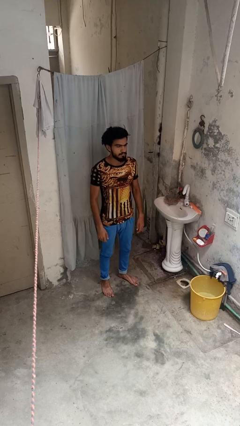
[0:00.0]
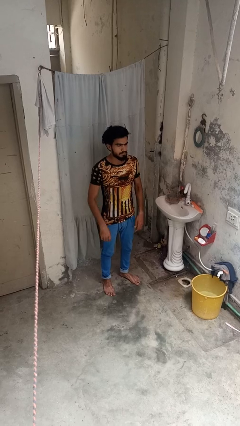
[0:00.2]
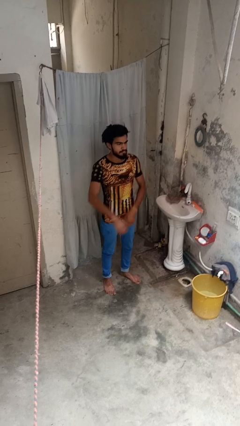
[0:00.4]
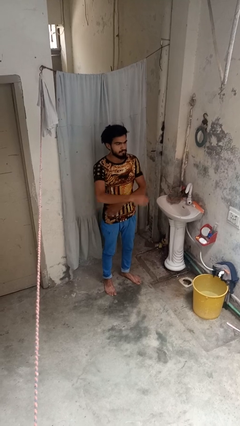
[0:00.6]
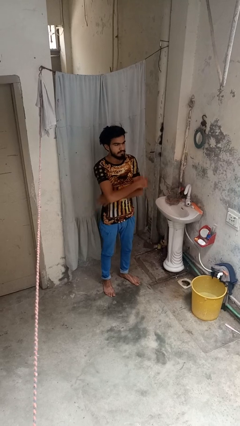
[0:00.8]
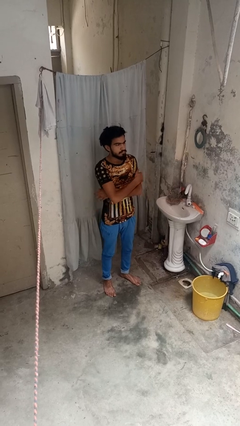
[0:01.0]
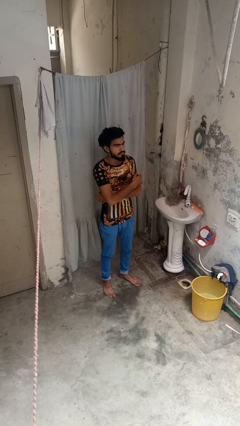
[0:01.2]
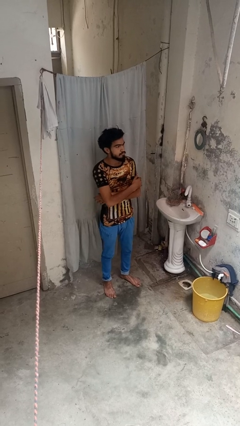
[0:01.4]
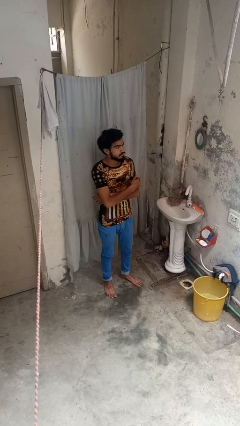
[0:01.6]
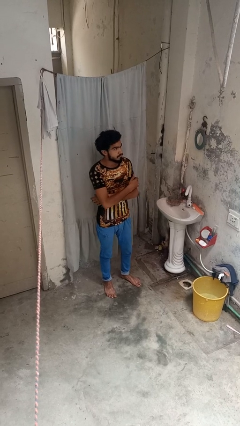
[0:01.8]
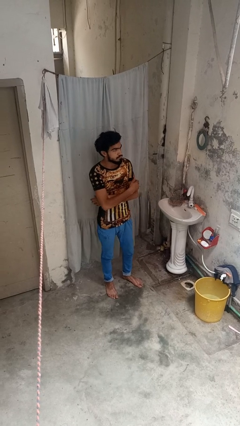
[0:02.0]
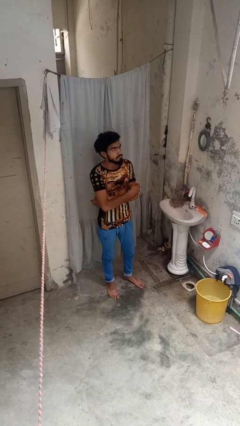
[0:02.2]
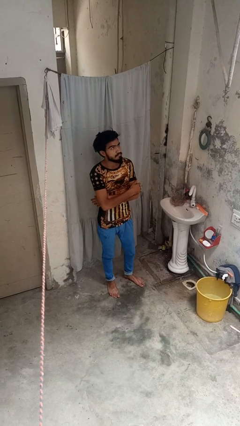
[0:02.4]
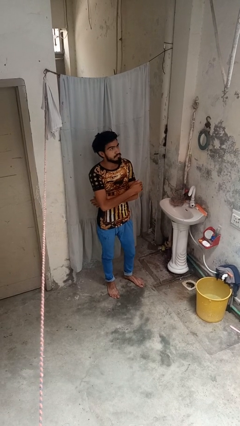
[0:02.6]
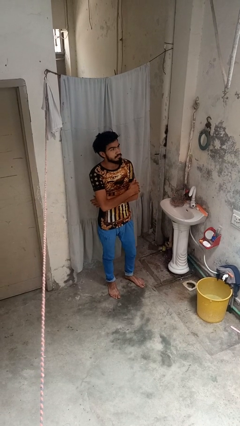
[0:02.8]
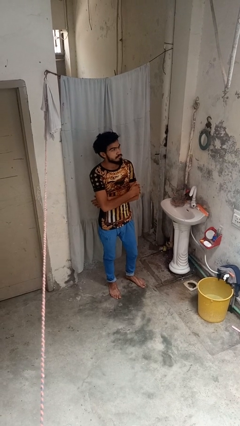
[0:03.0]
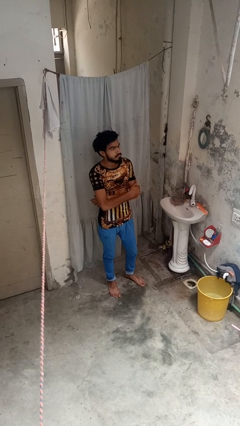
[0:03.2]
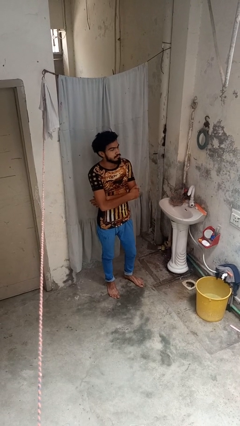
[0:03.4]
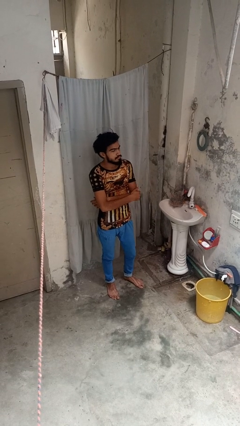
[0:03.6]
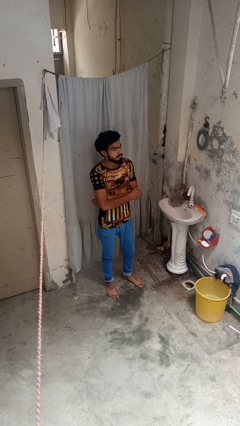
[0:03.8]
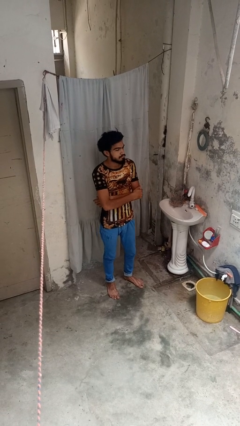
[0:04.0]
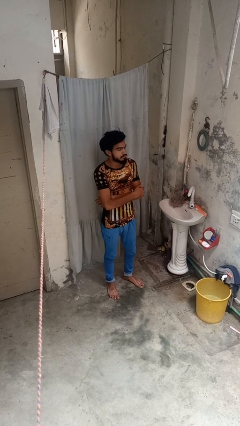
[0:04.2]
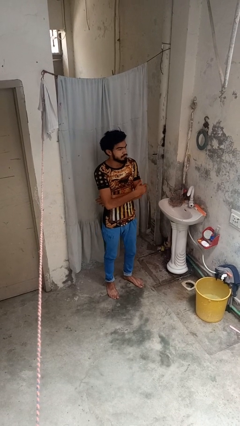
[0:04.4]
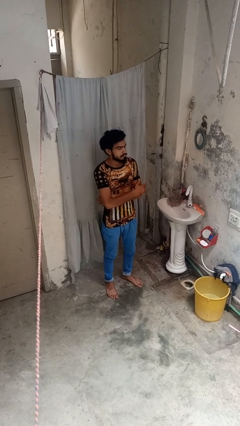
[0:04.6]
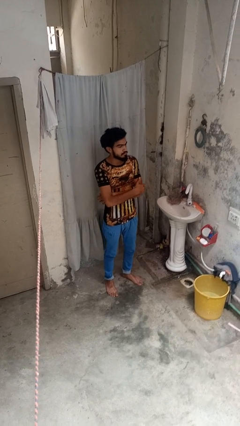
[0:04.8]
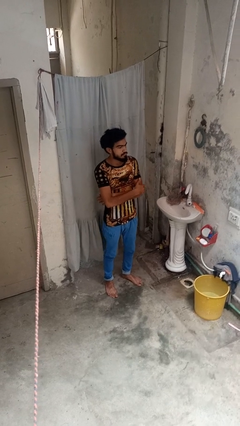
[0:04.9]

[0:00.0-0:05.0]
person crosses arms

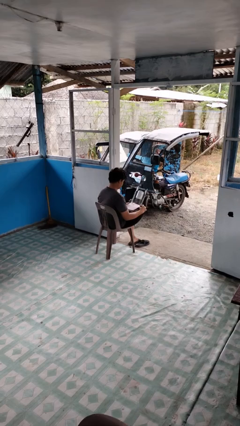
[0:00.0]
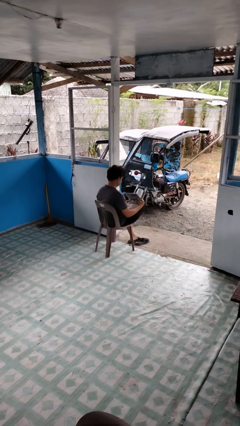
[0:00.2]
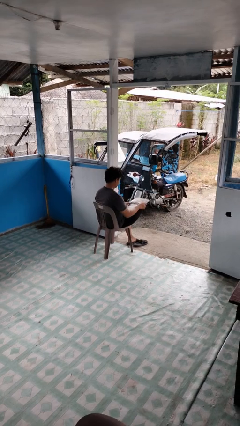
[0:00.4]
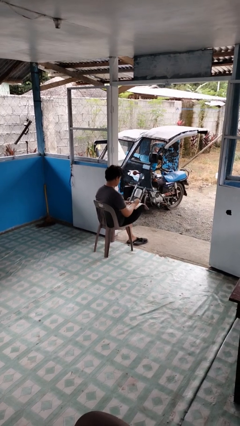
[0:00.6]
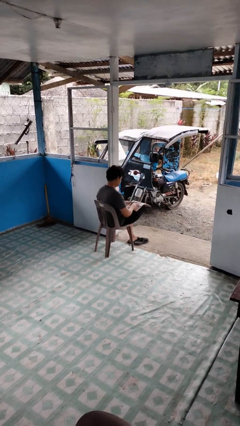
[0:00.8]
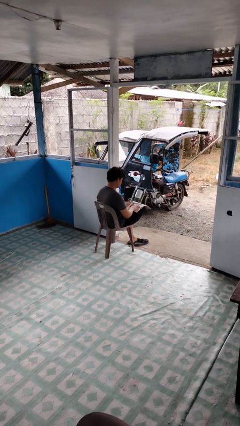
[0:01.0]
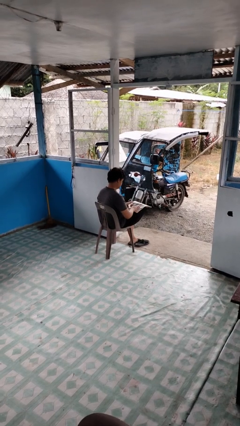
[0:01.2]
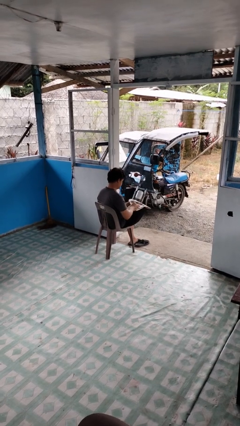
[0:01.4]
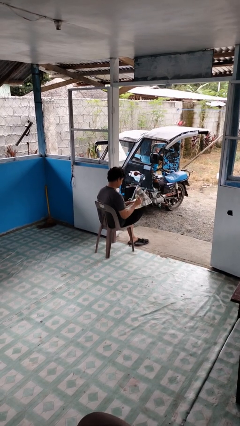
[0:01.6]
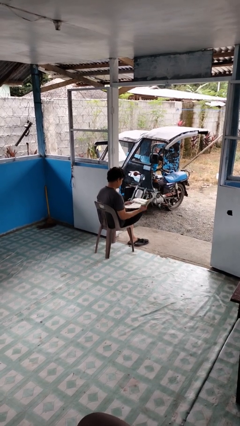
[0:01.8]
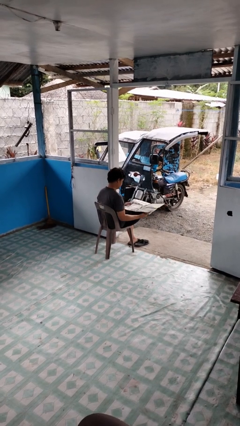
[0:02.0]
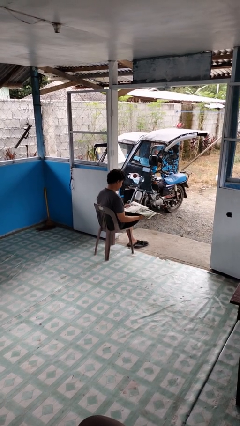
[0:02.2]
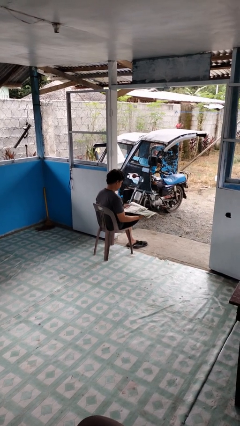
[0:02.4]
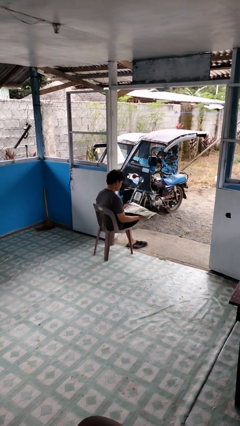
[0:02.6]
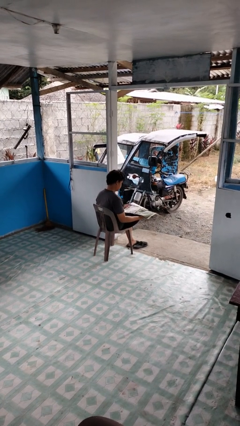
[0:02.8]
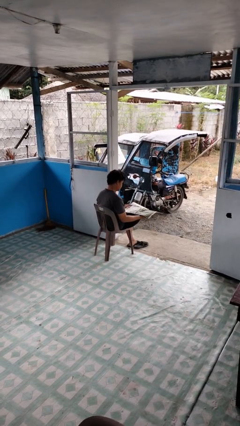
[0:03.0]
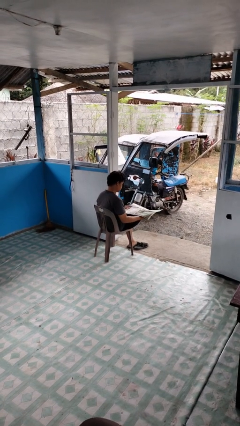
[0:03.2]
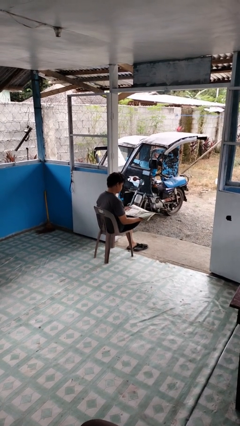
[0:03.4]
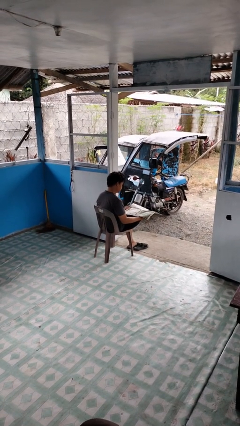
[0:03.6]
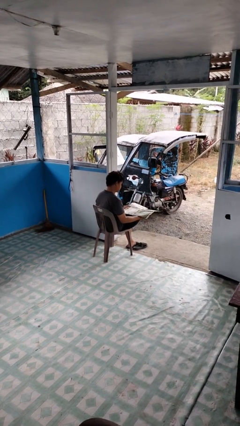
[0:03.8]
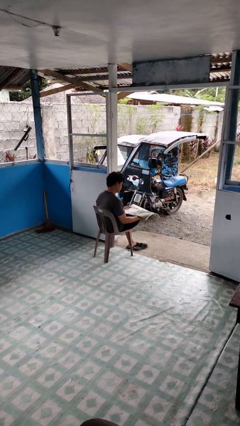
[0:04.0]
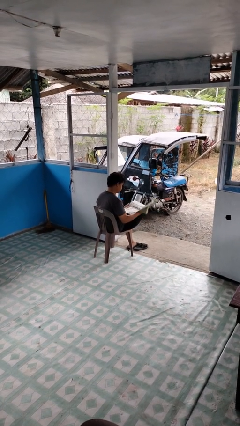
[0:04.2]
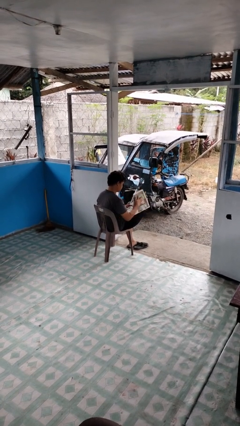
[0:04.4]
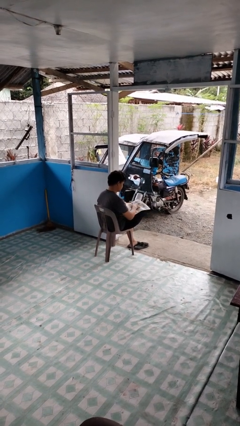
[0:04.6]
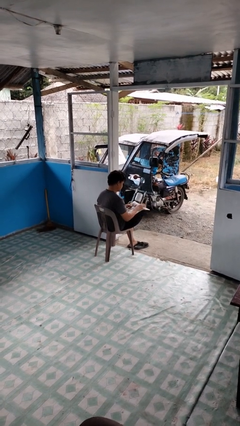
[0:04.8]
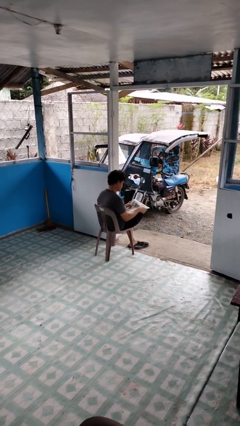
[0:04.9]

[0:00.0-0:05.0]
person reads newspaper

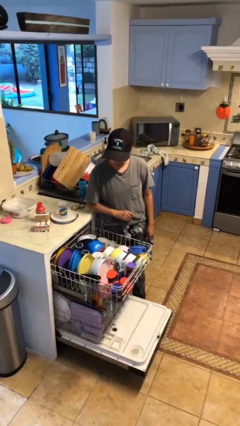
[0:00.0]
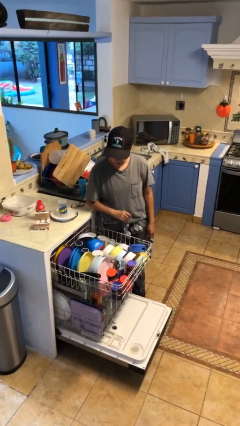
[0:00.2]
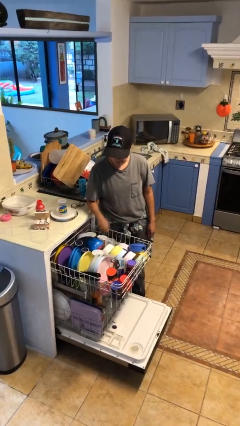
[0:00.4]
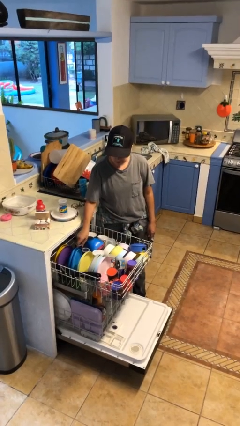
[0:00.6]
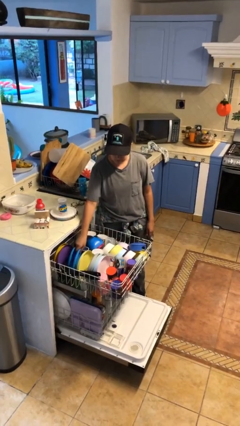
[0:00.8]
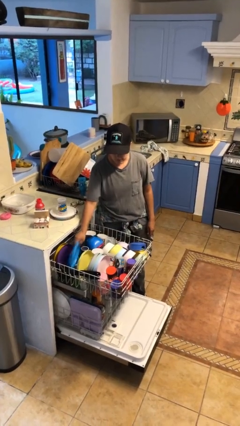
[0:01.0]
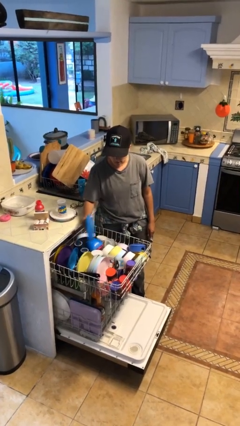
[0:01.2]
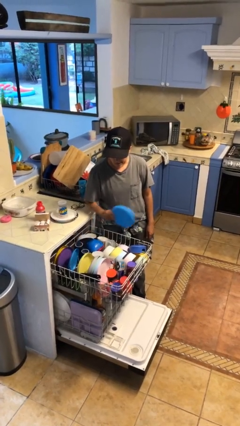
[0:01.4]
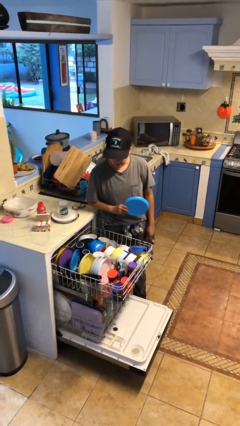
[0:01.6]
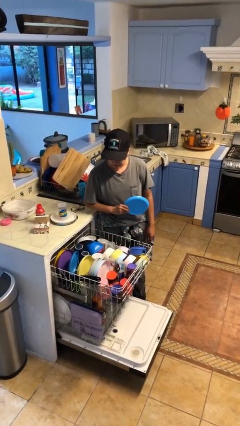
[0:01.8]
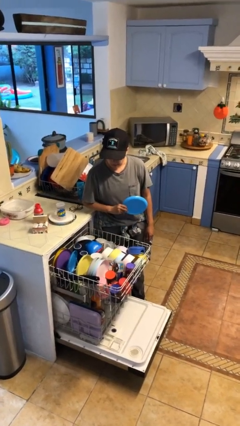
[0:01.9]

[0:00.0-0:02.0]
person unloads dishwasher

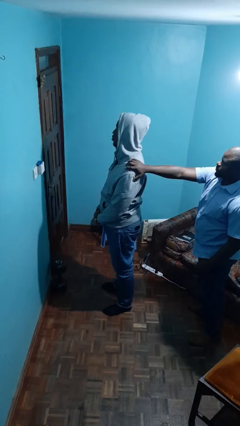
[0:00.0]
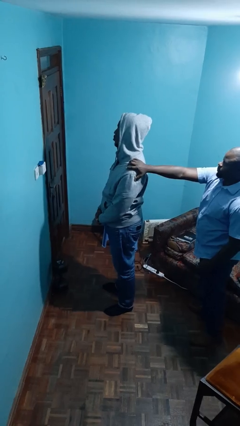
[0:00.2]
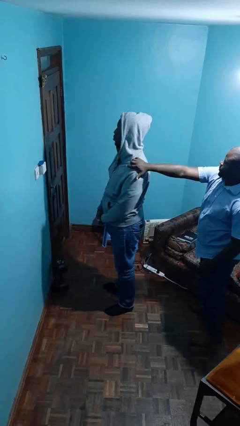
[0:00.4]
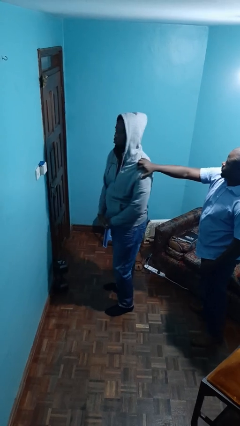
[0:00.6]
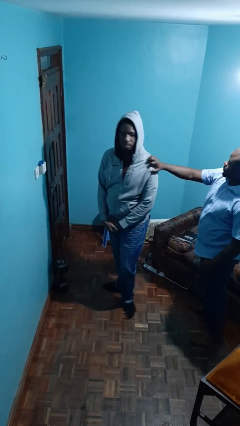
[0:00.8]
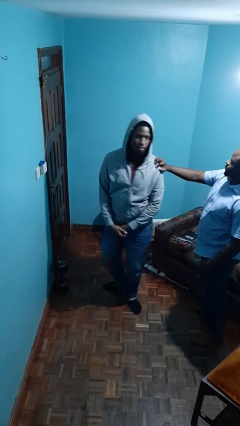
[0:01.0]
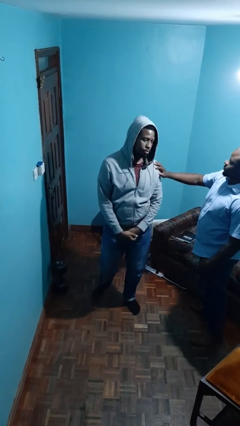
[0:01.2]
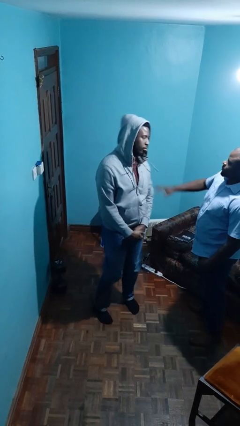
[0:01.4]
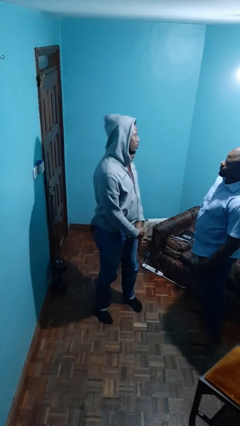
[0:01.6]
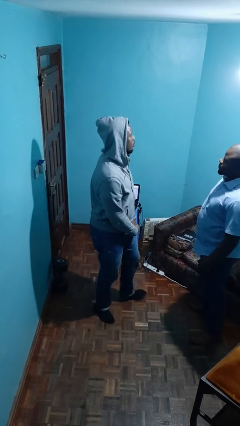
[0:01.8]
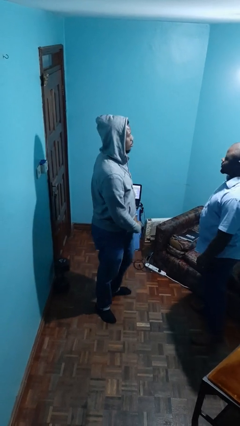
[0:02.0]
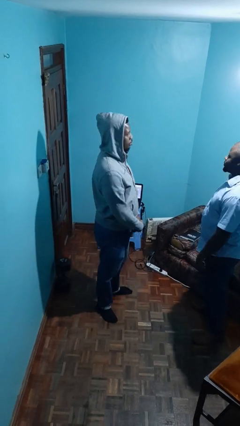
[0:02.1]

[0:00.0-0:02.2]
person spins person around

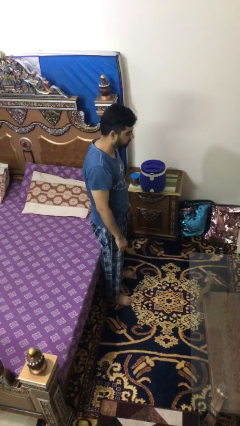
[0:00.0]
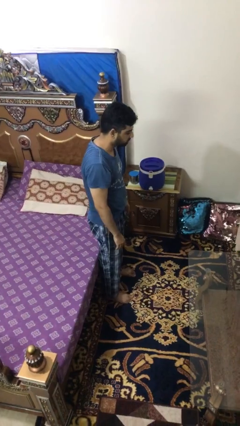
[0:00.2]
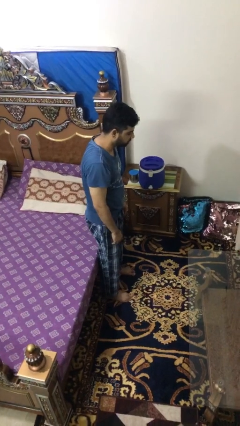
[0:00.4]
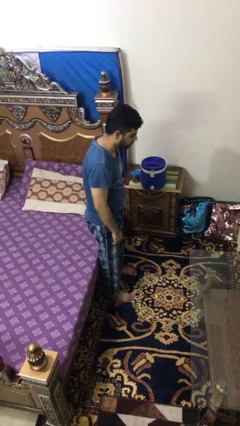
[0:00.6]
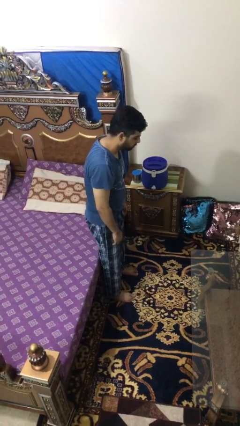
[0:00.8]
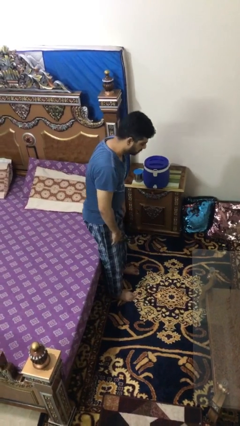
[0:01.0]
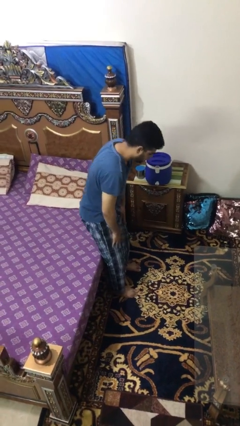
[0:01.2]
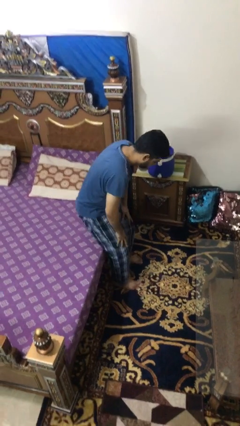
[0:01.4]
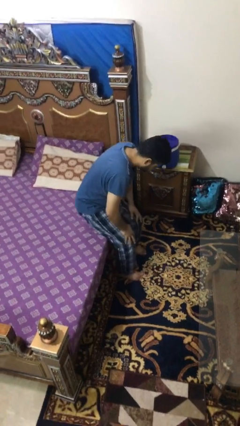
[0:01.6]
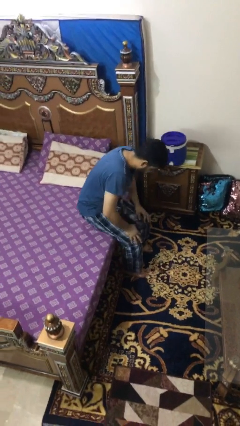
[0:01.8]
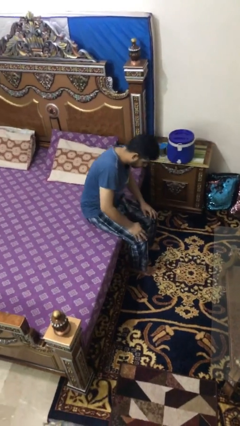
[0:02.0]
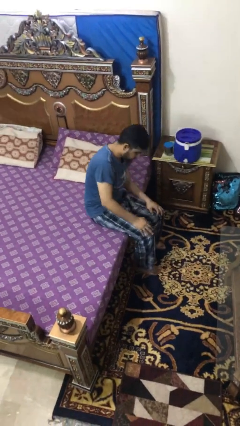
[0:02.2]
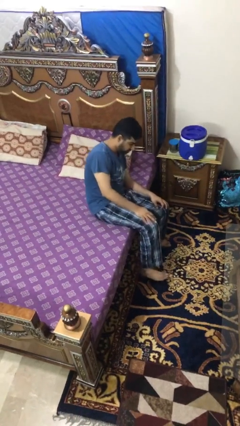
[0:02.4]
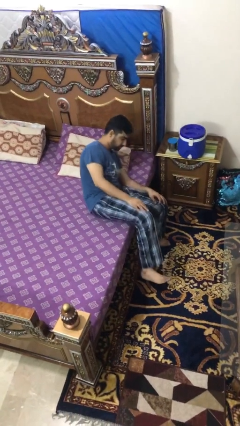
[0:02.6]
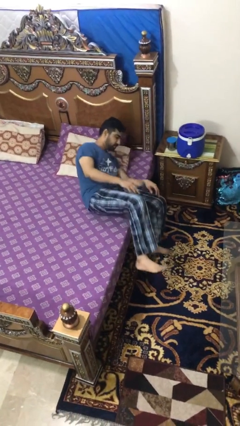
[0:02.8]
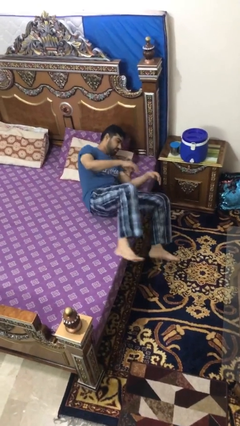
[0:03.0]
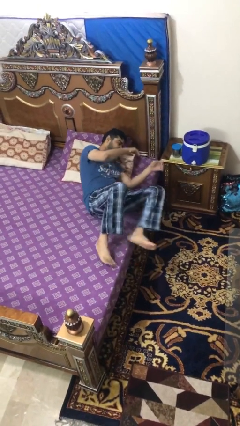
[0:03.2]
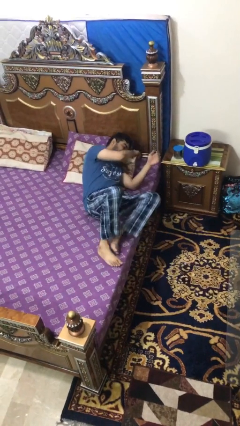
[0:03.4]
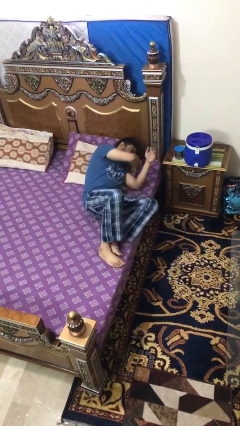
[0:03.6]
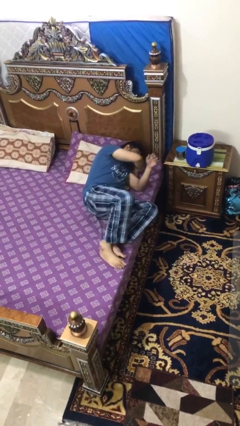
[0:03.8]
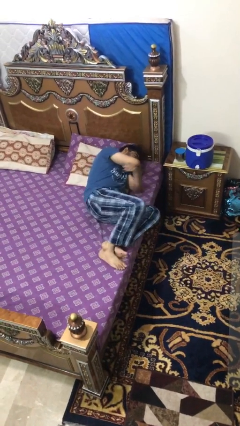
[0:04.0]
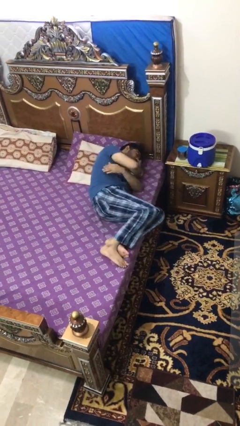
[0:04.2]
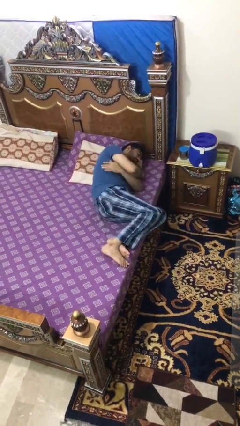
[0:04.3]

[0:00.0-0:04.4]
person lies down on bed
